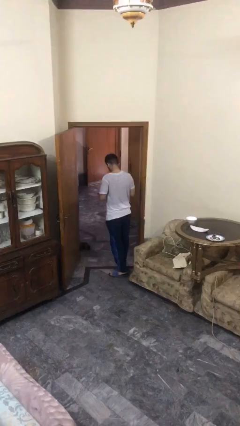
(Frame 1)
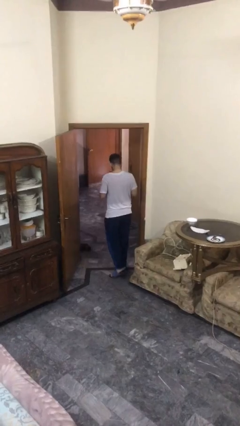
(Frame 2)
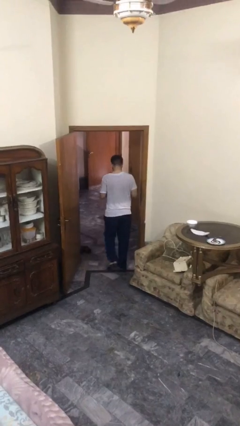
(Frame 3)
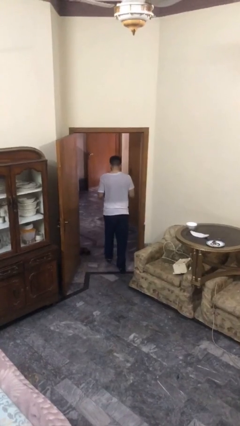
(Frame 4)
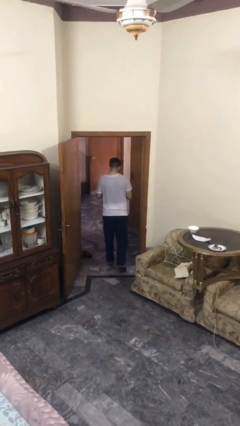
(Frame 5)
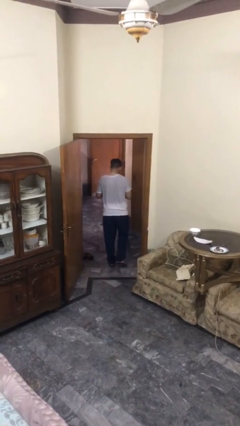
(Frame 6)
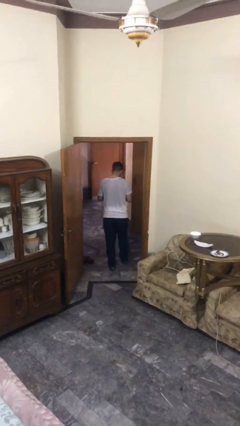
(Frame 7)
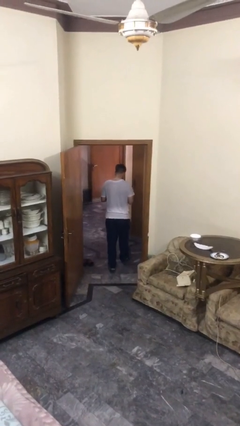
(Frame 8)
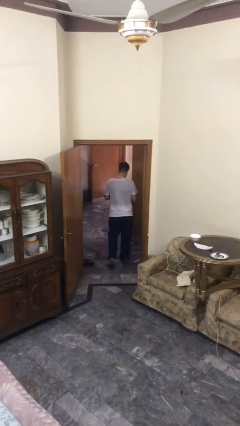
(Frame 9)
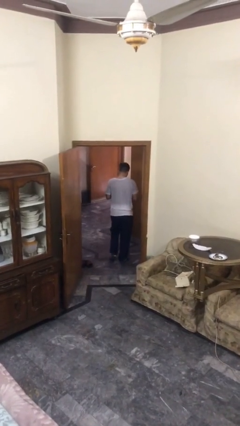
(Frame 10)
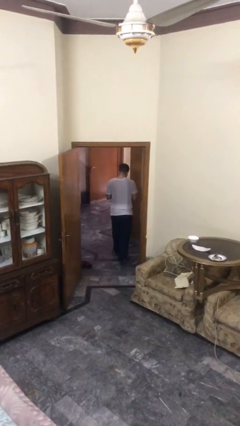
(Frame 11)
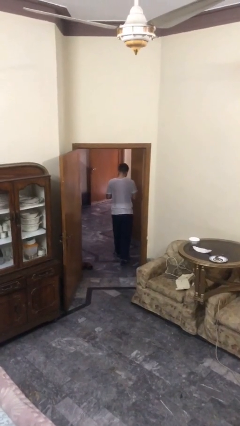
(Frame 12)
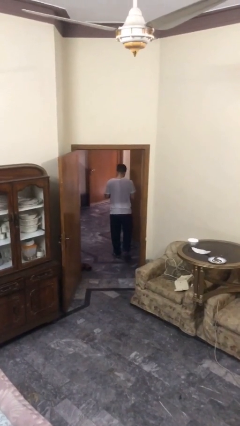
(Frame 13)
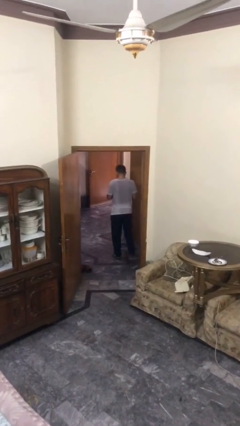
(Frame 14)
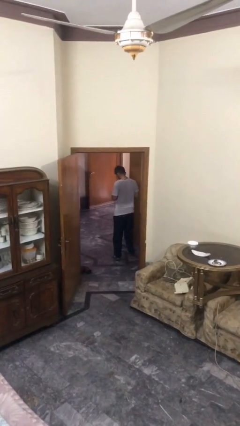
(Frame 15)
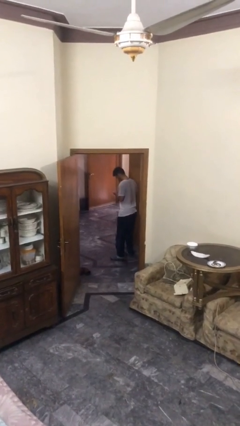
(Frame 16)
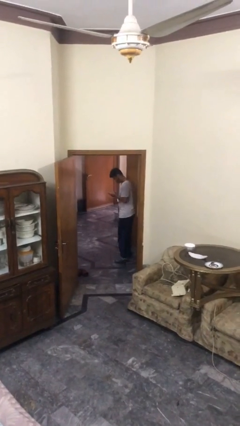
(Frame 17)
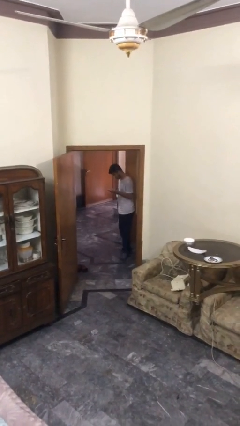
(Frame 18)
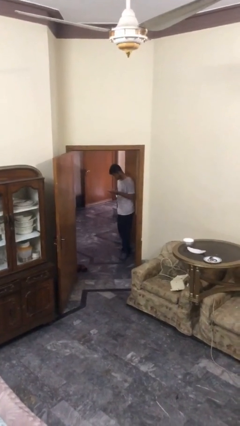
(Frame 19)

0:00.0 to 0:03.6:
person exits scene through structure

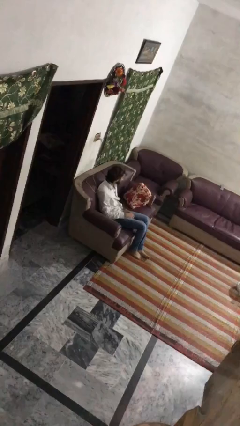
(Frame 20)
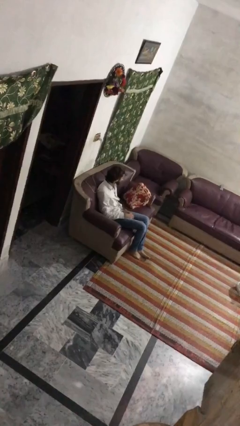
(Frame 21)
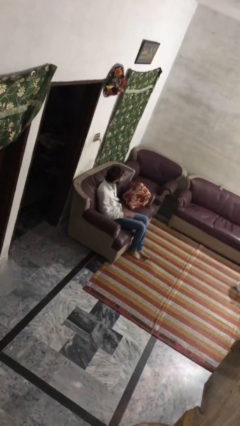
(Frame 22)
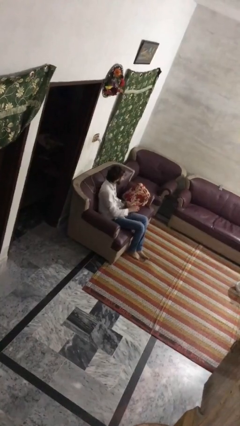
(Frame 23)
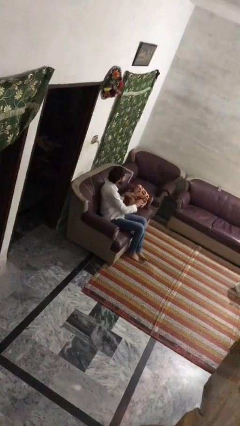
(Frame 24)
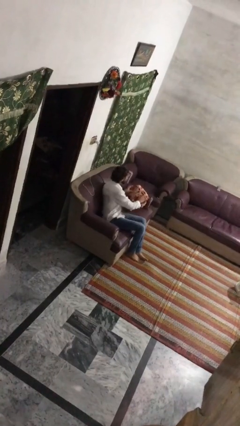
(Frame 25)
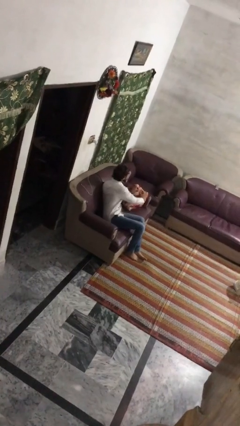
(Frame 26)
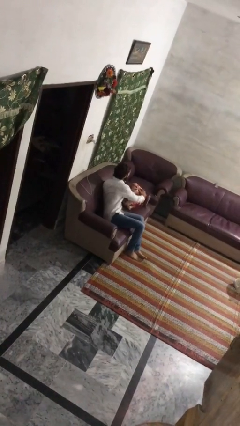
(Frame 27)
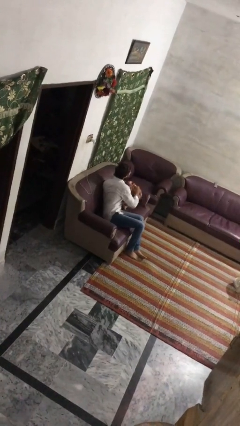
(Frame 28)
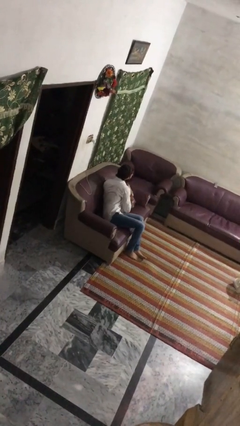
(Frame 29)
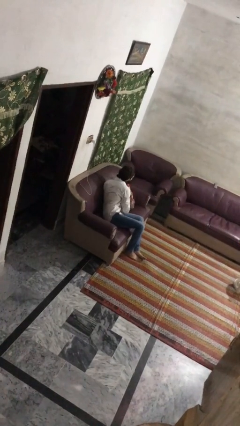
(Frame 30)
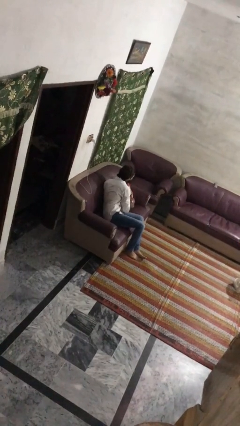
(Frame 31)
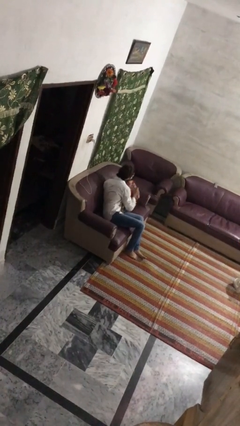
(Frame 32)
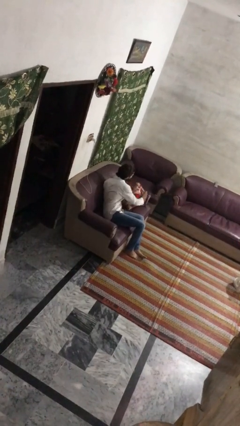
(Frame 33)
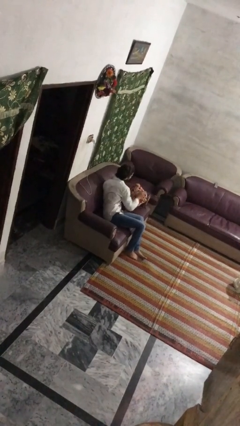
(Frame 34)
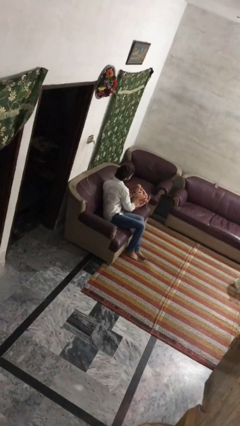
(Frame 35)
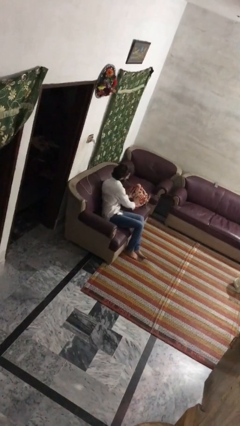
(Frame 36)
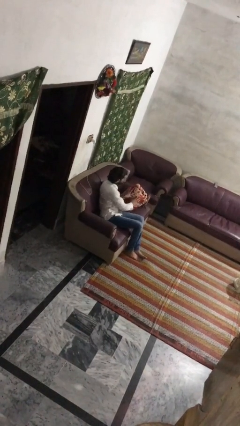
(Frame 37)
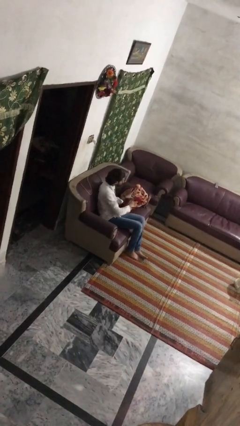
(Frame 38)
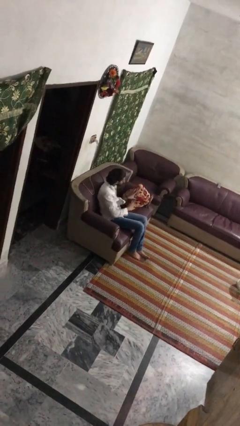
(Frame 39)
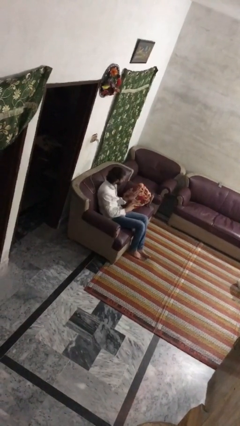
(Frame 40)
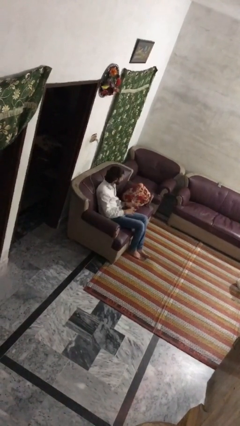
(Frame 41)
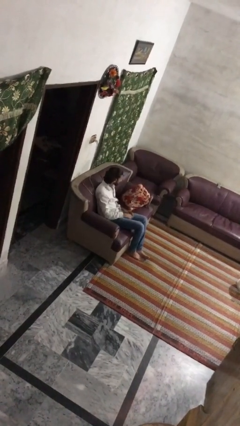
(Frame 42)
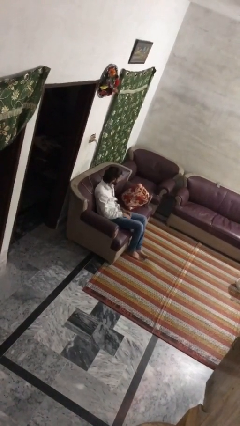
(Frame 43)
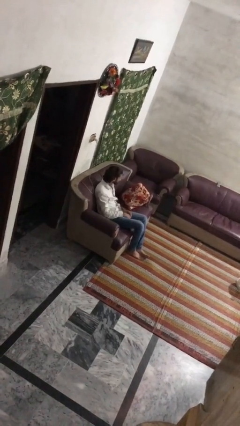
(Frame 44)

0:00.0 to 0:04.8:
person searches in couch

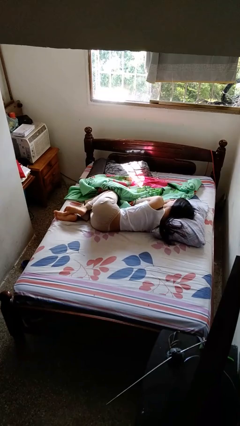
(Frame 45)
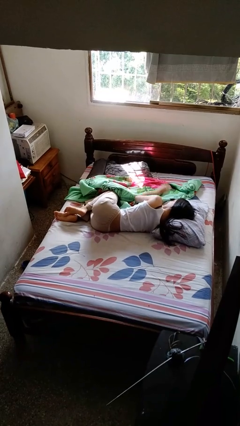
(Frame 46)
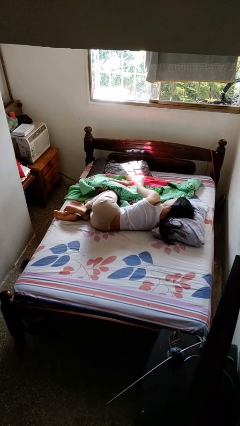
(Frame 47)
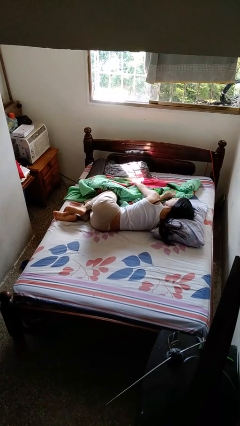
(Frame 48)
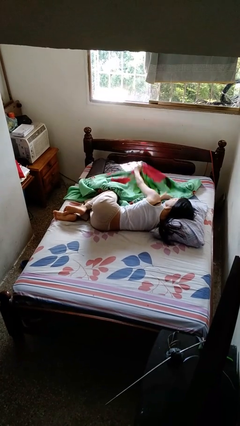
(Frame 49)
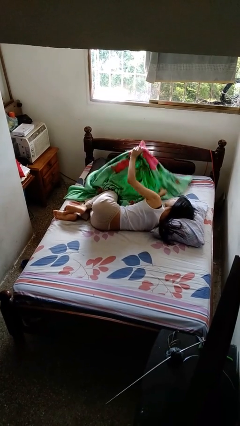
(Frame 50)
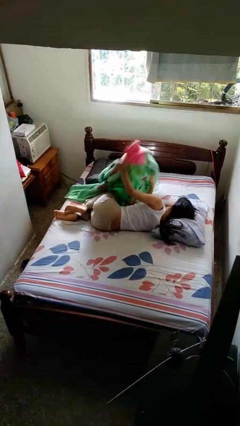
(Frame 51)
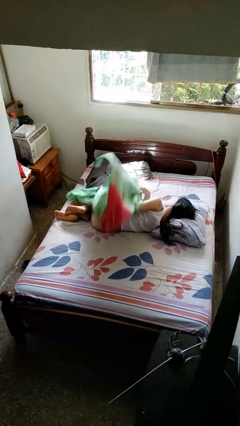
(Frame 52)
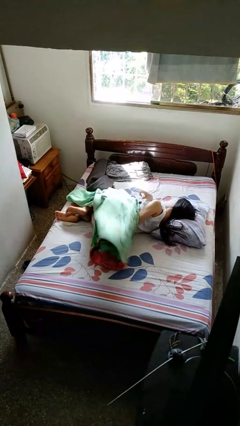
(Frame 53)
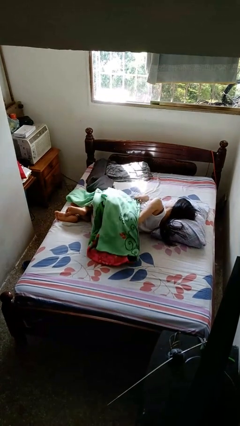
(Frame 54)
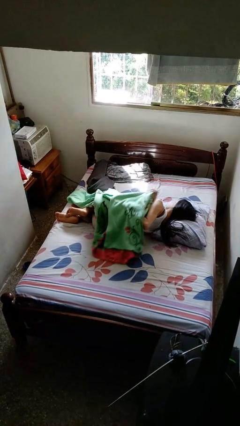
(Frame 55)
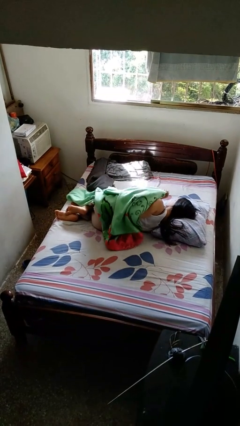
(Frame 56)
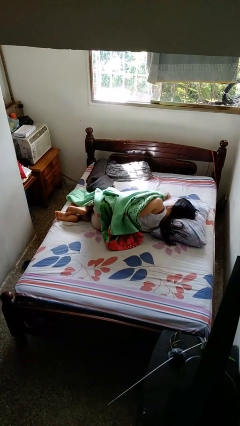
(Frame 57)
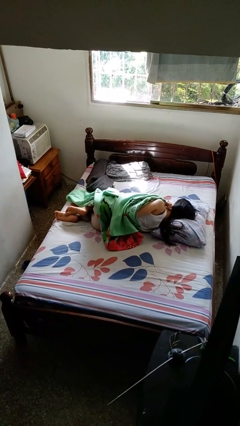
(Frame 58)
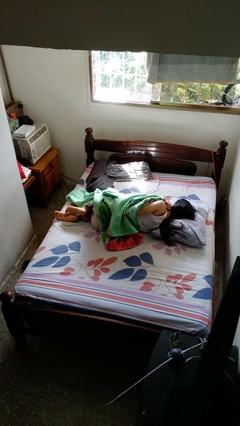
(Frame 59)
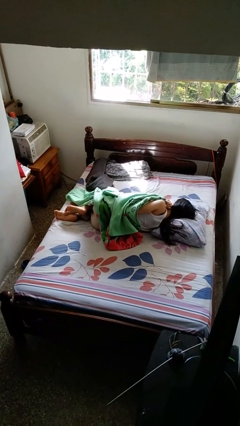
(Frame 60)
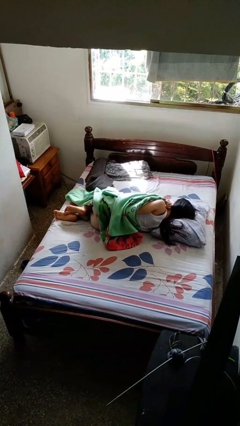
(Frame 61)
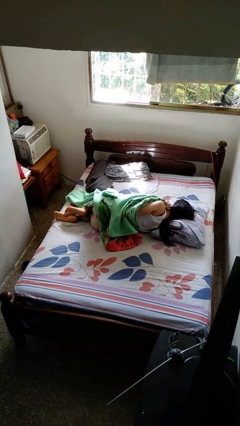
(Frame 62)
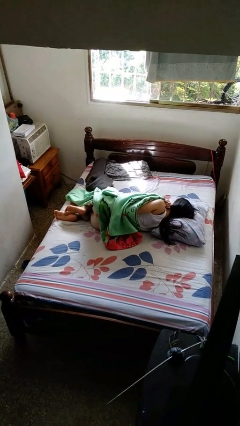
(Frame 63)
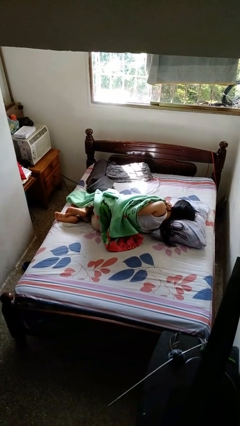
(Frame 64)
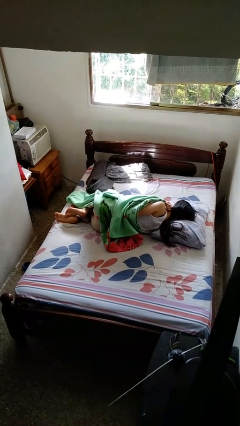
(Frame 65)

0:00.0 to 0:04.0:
person covers with bedsheets

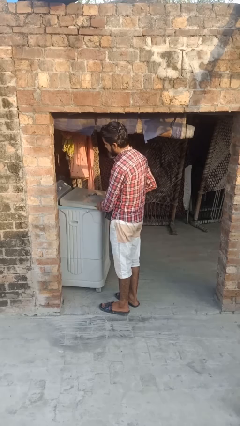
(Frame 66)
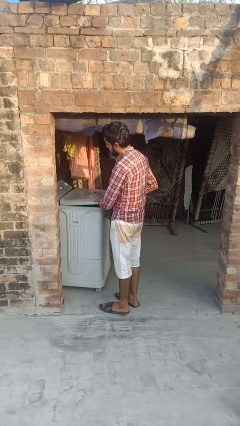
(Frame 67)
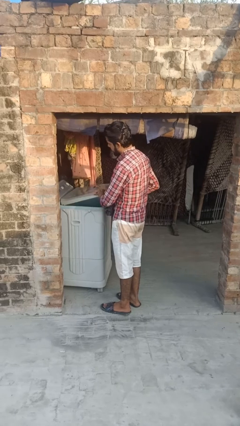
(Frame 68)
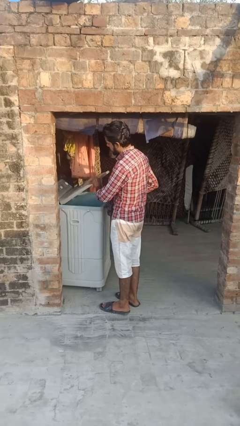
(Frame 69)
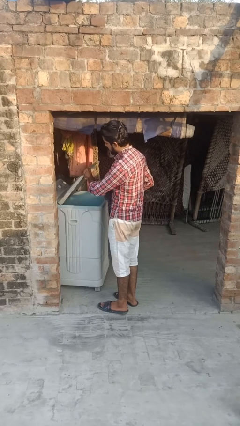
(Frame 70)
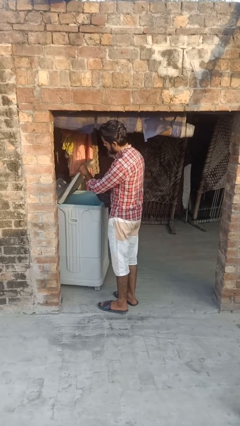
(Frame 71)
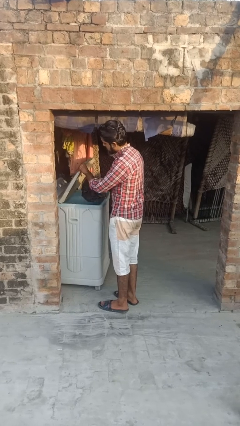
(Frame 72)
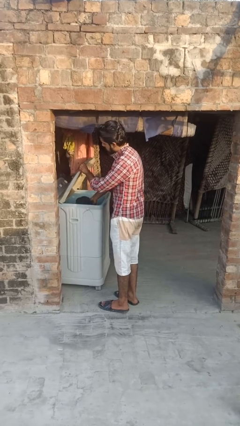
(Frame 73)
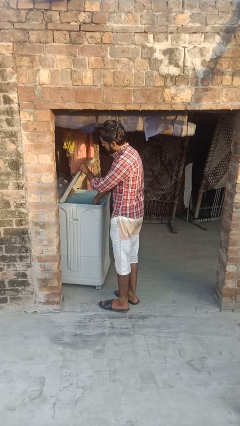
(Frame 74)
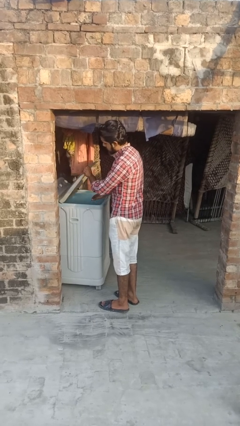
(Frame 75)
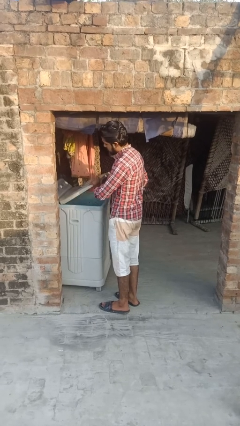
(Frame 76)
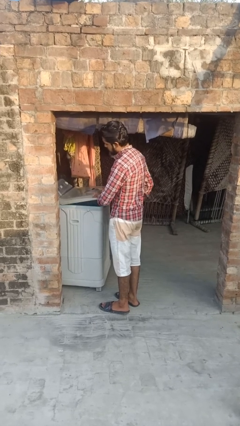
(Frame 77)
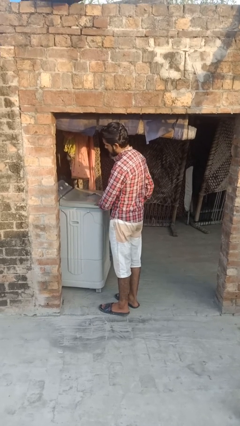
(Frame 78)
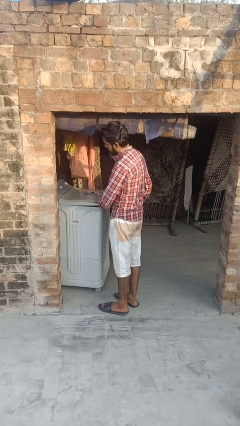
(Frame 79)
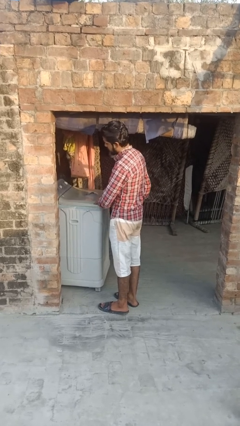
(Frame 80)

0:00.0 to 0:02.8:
person loads clotheswasher

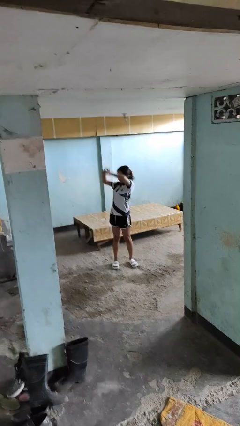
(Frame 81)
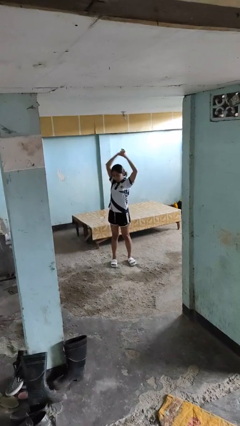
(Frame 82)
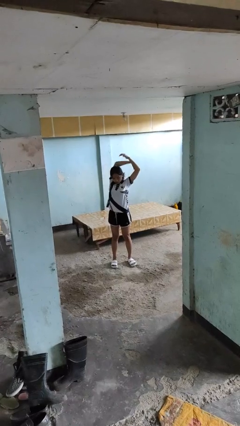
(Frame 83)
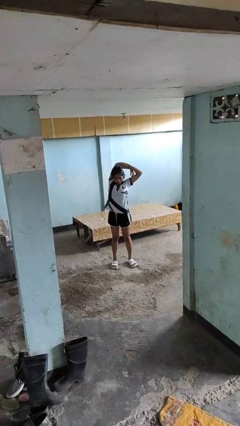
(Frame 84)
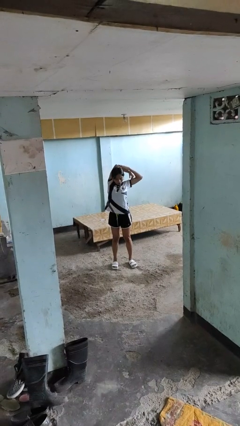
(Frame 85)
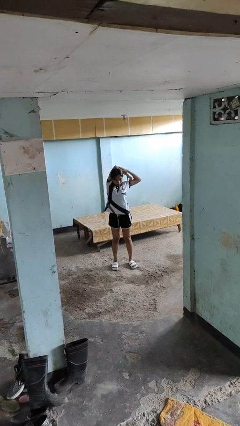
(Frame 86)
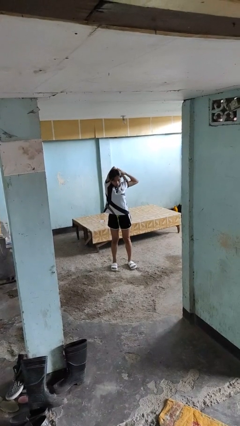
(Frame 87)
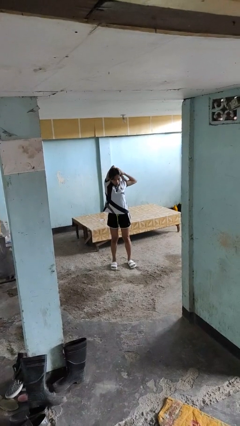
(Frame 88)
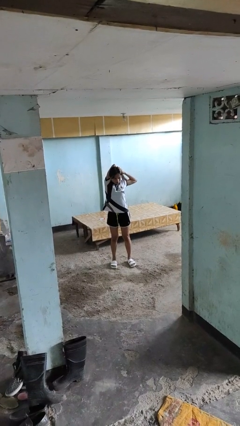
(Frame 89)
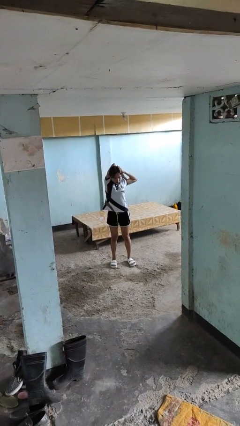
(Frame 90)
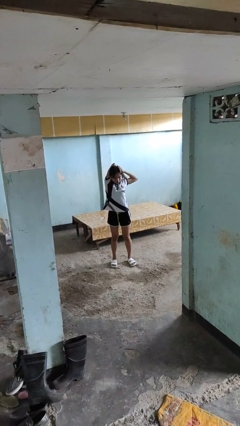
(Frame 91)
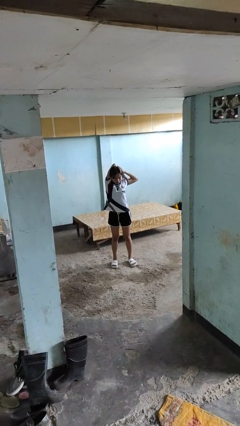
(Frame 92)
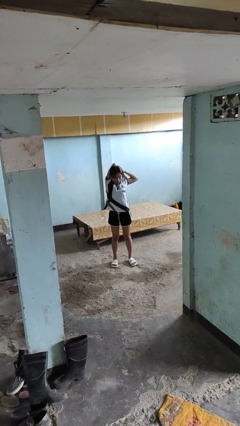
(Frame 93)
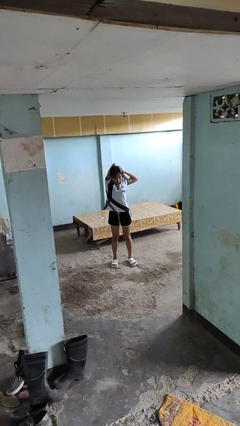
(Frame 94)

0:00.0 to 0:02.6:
person stretches arms over head
